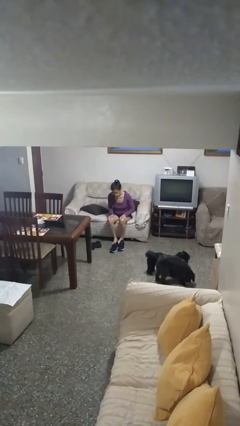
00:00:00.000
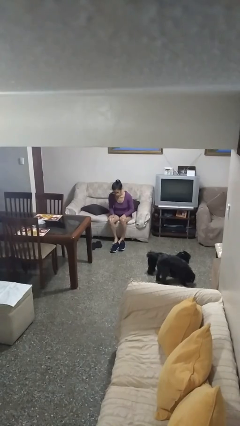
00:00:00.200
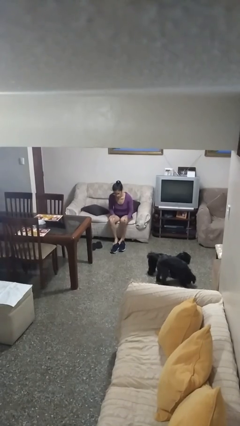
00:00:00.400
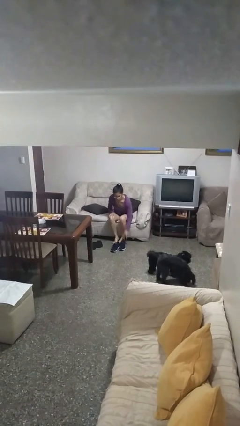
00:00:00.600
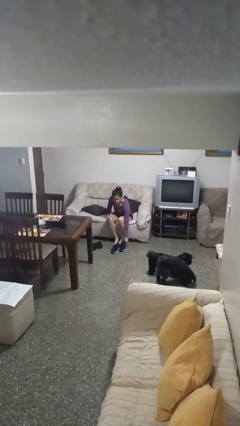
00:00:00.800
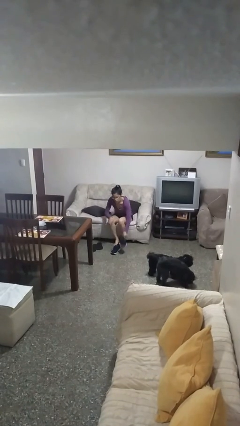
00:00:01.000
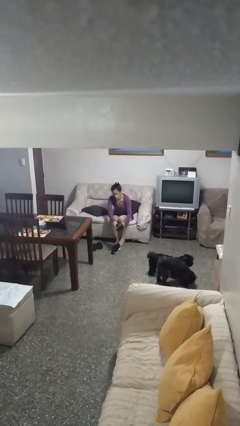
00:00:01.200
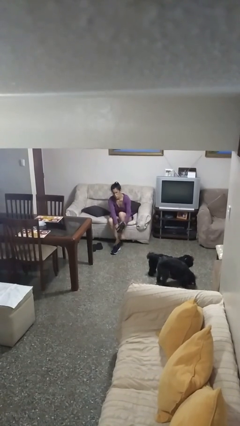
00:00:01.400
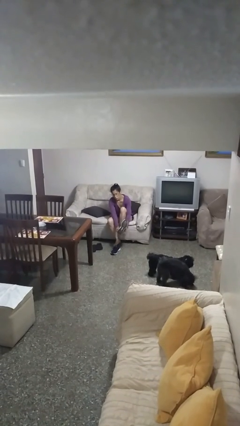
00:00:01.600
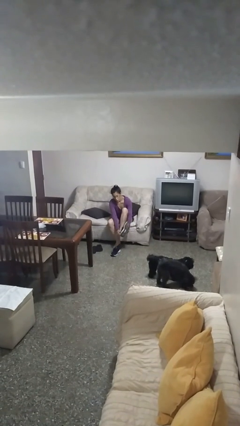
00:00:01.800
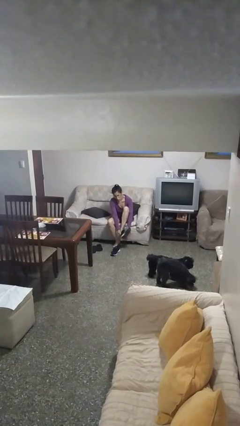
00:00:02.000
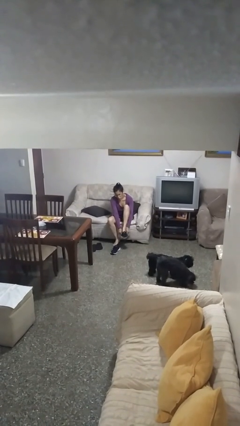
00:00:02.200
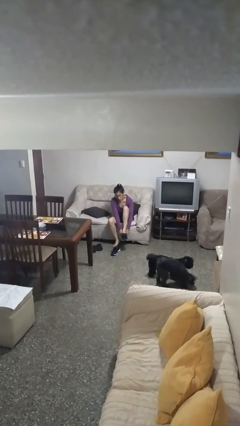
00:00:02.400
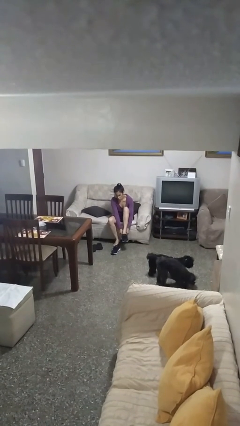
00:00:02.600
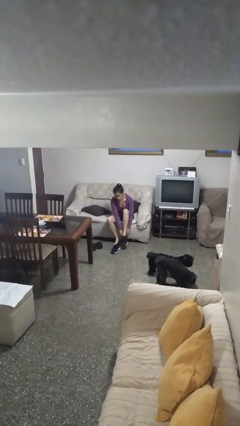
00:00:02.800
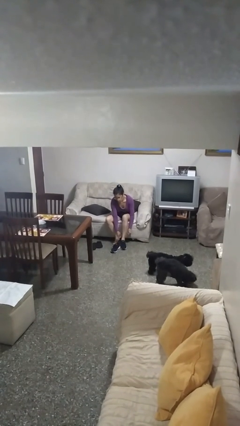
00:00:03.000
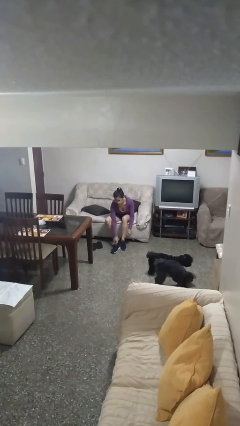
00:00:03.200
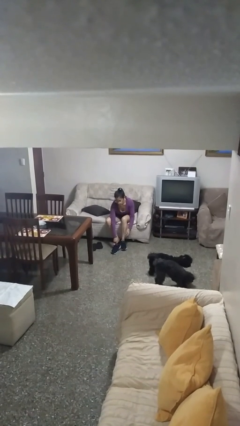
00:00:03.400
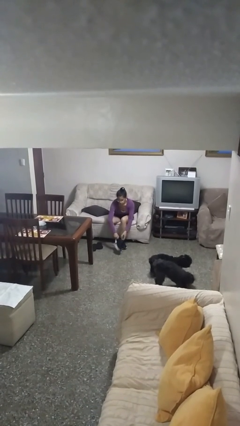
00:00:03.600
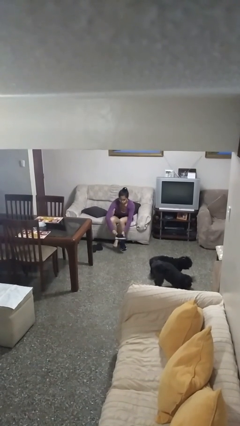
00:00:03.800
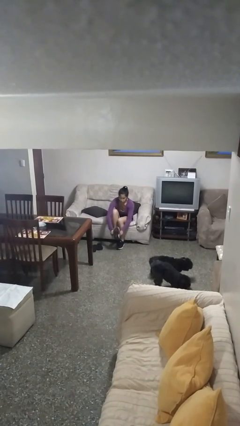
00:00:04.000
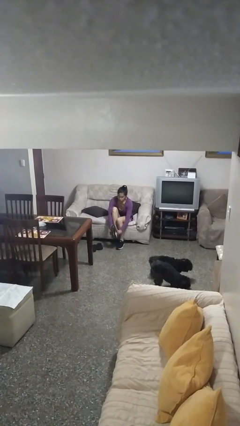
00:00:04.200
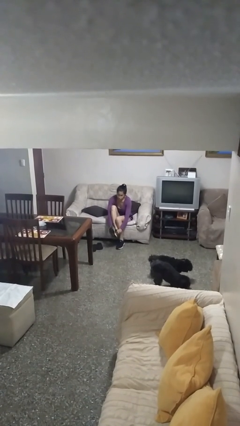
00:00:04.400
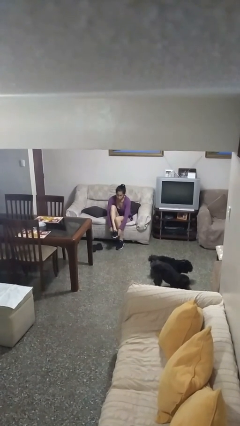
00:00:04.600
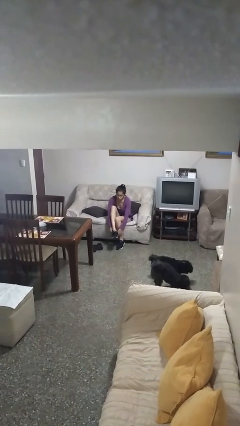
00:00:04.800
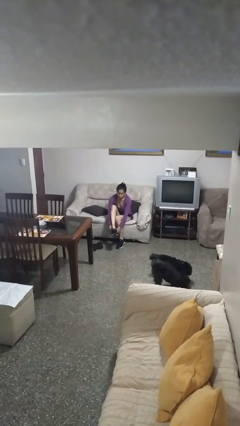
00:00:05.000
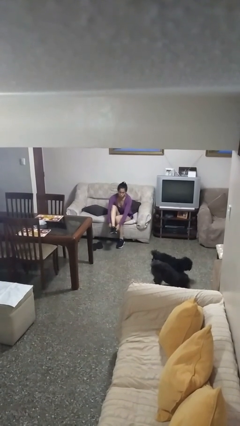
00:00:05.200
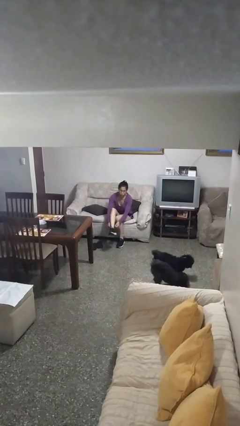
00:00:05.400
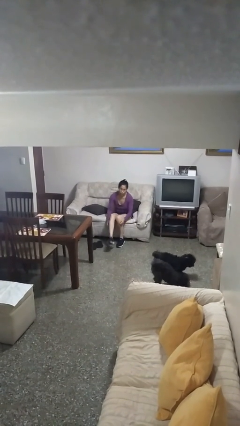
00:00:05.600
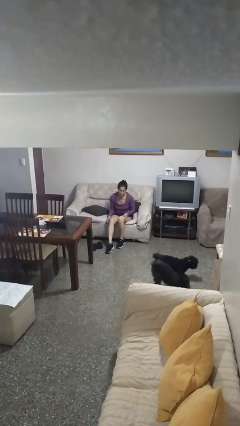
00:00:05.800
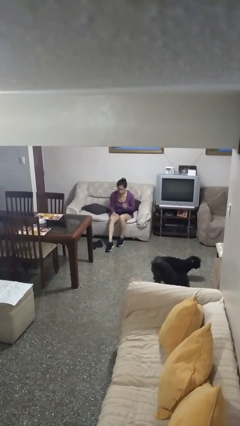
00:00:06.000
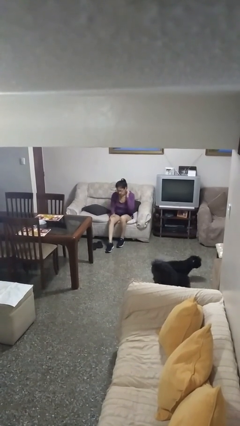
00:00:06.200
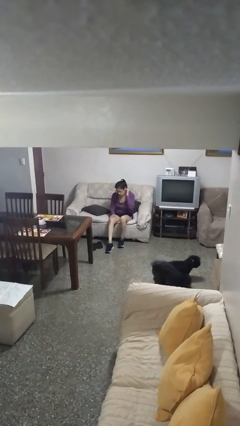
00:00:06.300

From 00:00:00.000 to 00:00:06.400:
person puts on shoes

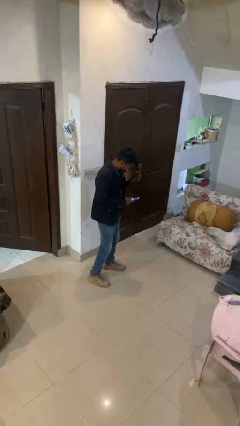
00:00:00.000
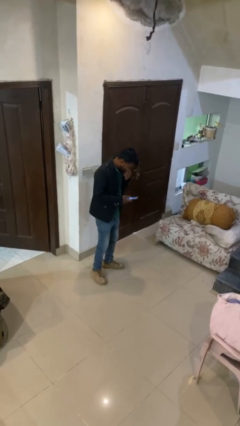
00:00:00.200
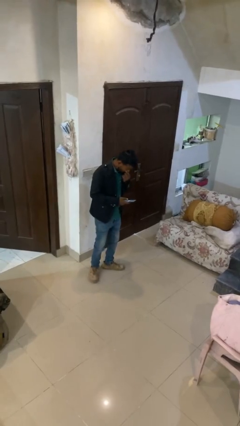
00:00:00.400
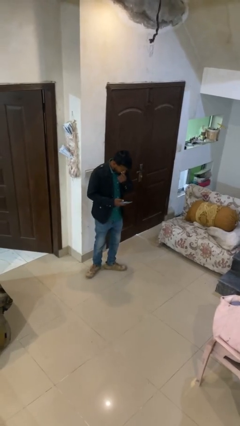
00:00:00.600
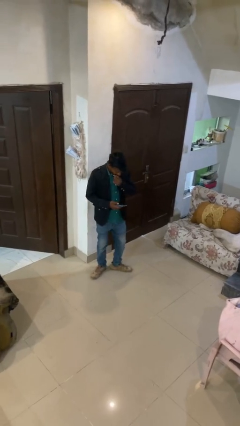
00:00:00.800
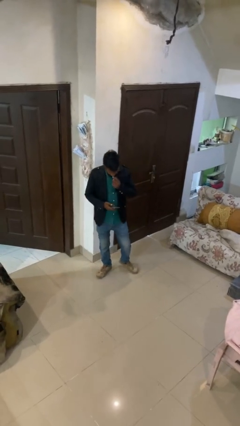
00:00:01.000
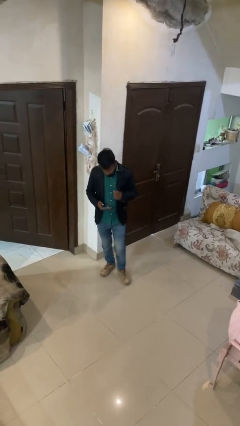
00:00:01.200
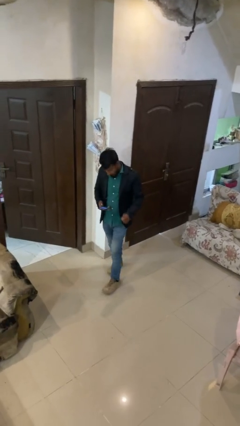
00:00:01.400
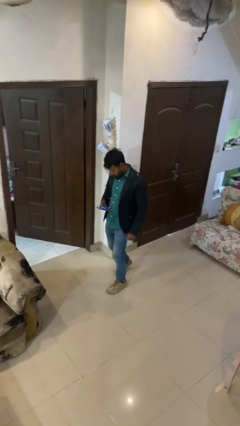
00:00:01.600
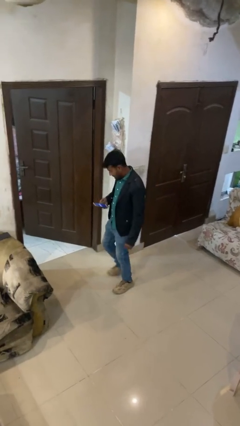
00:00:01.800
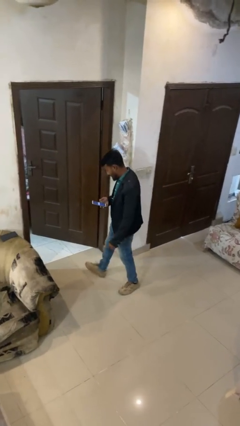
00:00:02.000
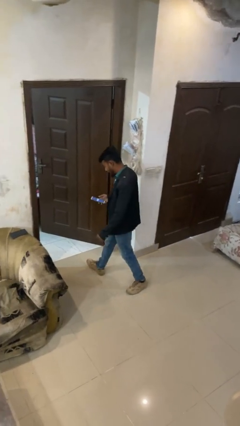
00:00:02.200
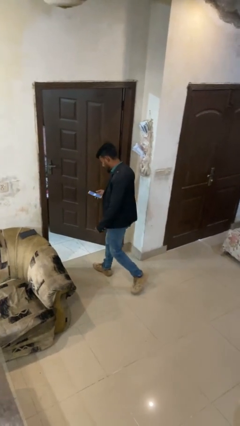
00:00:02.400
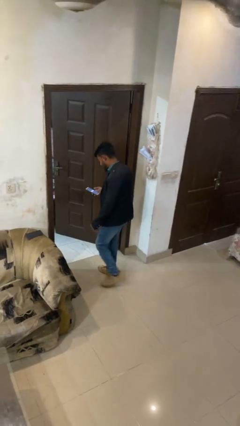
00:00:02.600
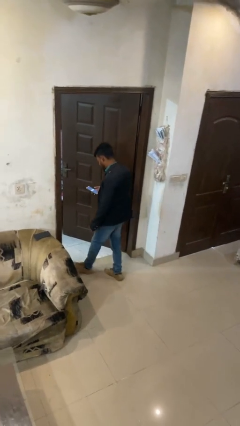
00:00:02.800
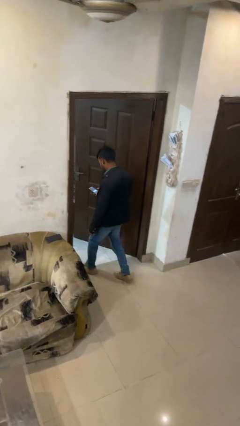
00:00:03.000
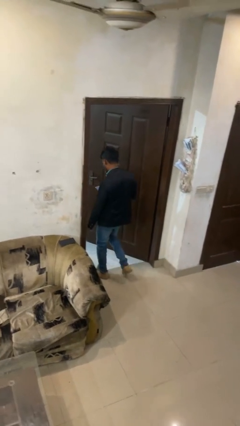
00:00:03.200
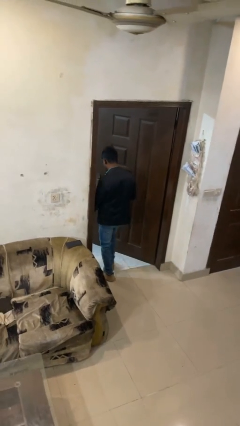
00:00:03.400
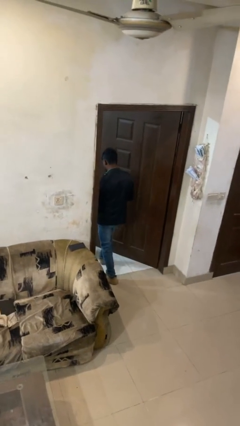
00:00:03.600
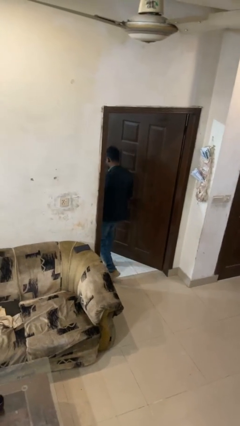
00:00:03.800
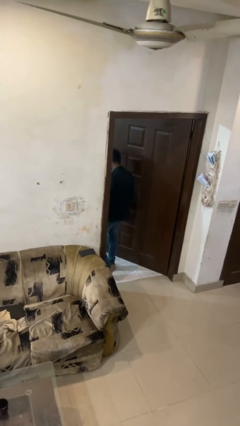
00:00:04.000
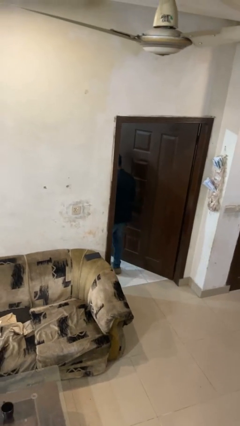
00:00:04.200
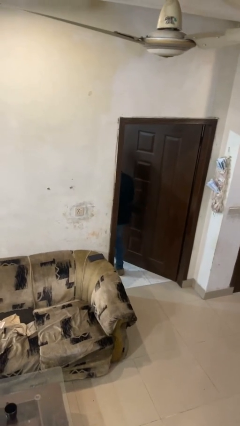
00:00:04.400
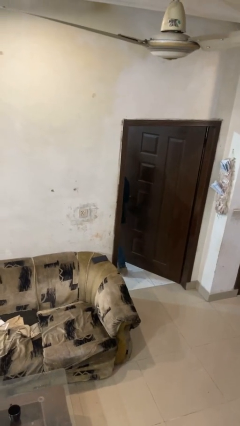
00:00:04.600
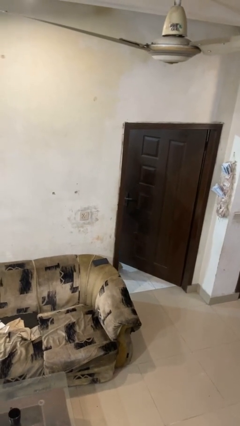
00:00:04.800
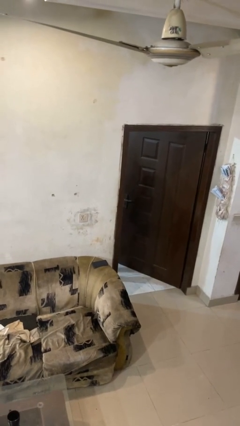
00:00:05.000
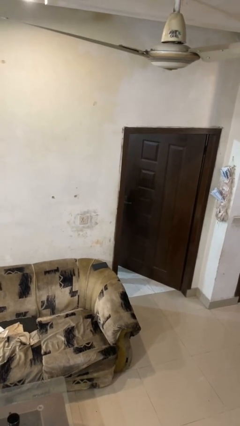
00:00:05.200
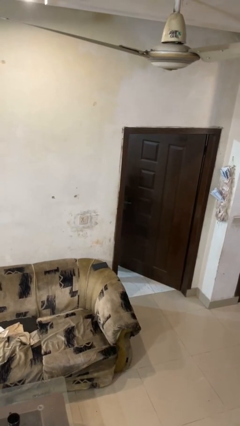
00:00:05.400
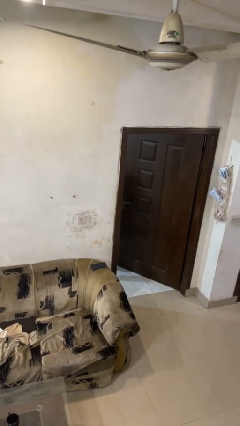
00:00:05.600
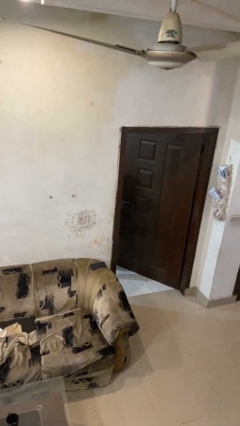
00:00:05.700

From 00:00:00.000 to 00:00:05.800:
person exits scene through structure

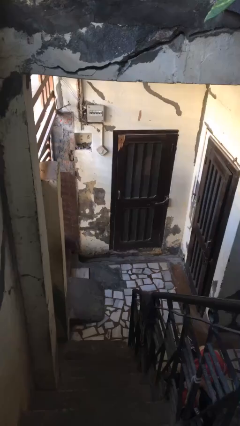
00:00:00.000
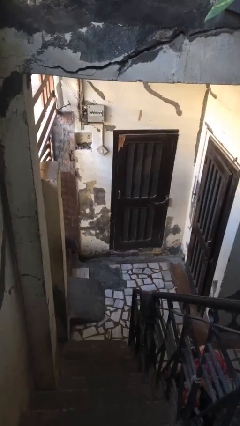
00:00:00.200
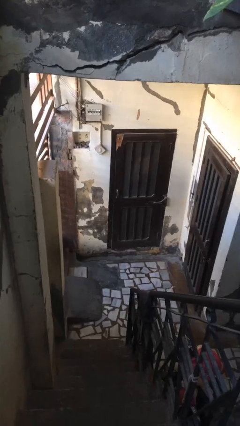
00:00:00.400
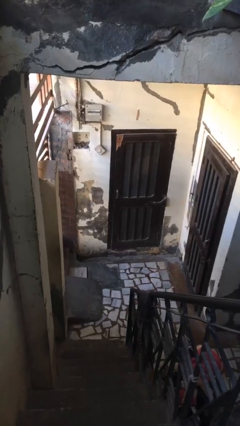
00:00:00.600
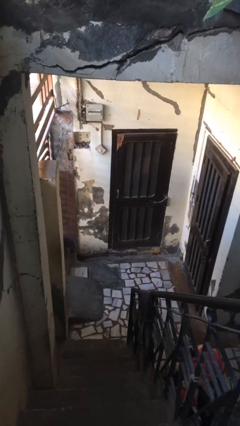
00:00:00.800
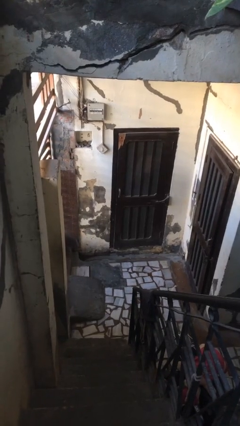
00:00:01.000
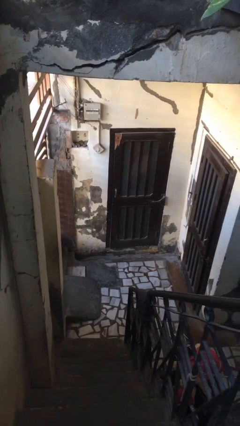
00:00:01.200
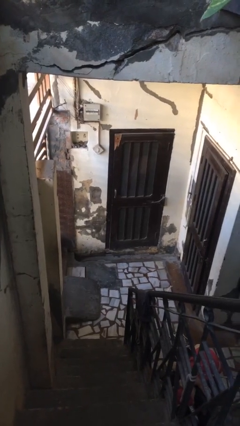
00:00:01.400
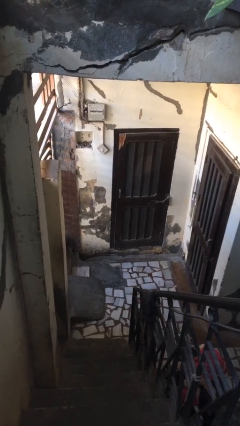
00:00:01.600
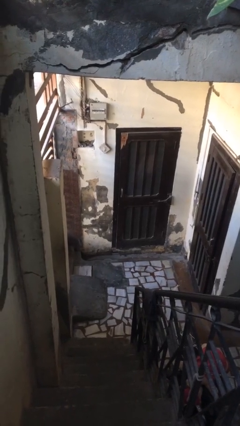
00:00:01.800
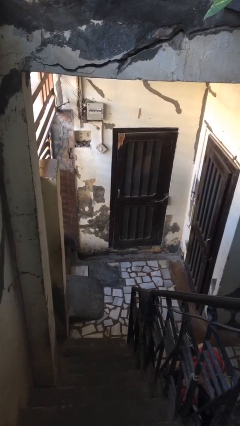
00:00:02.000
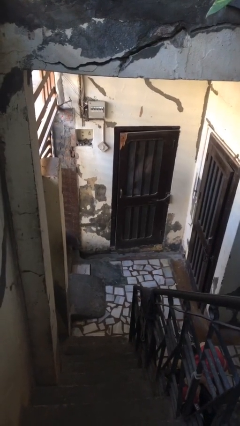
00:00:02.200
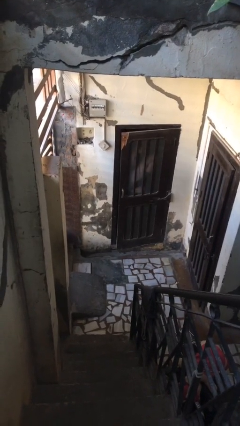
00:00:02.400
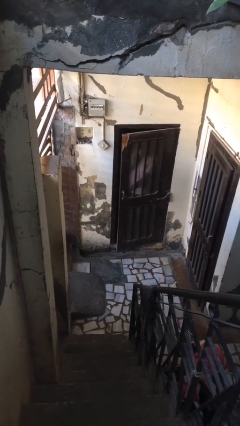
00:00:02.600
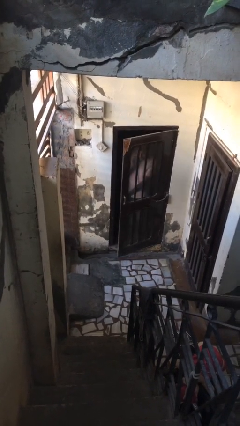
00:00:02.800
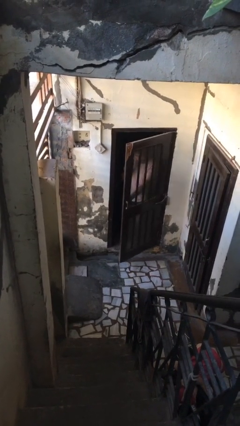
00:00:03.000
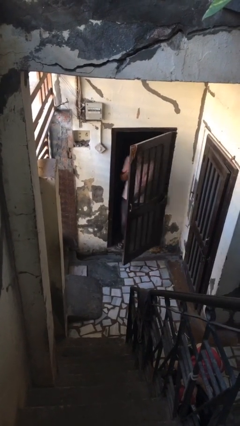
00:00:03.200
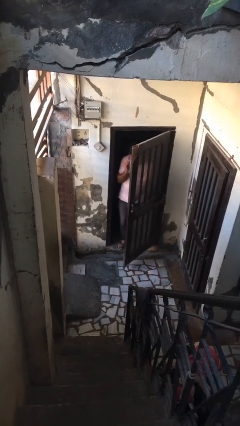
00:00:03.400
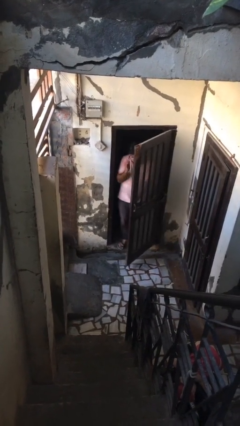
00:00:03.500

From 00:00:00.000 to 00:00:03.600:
person opens facility door

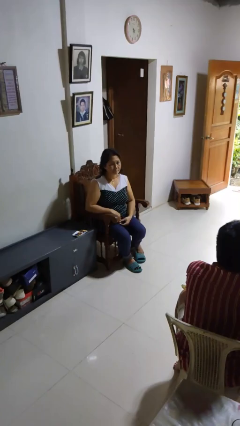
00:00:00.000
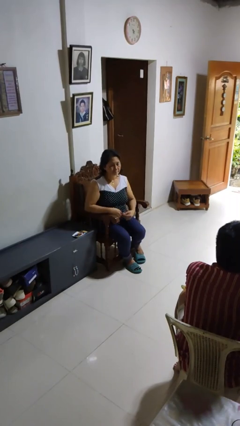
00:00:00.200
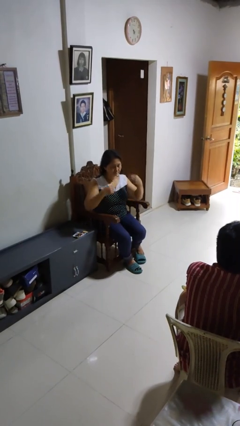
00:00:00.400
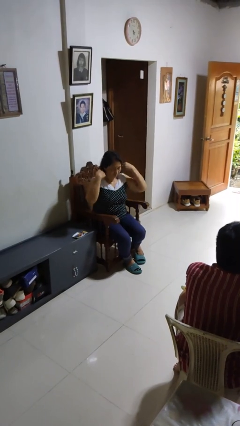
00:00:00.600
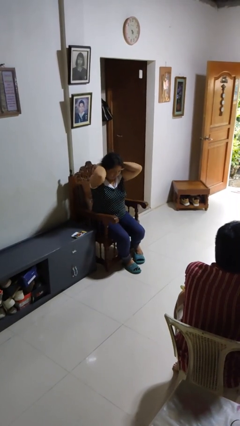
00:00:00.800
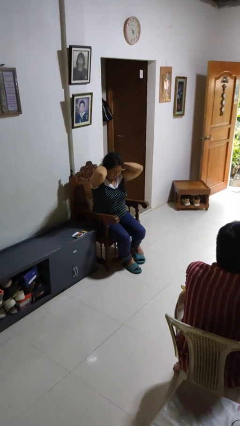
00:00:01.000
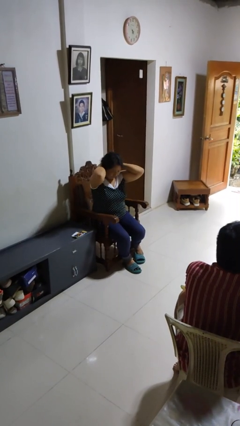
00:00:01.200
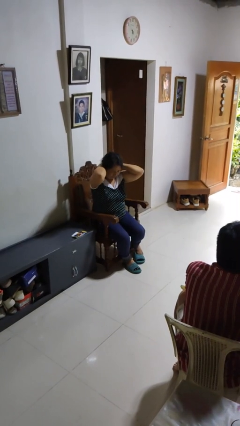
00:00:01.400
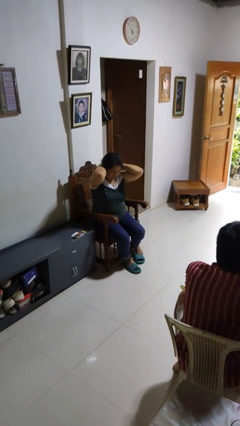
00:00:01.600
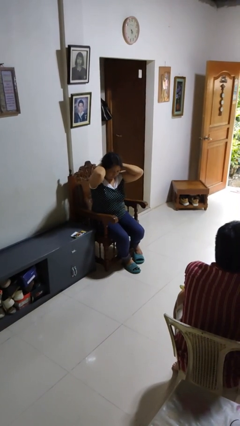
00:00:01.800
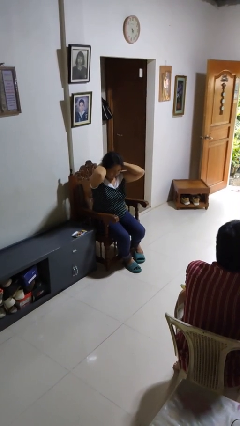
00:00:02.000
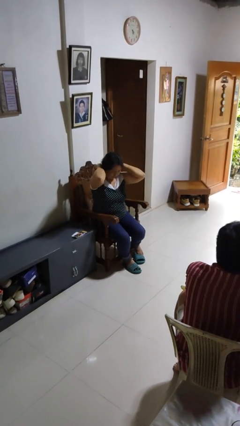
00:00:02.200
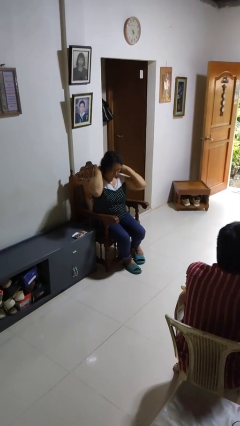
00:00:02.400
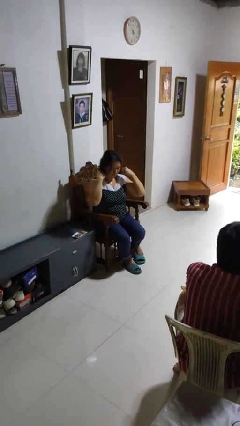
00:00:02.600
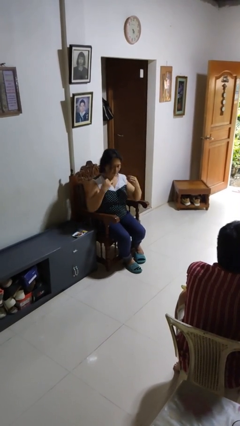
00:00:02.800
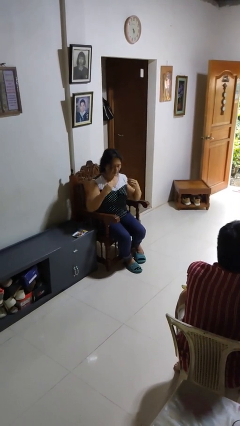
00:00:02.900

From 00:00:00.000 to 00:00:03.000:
person takes off necklace
